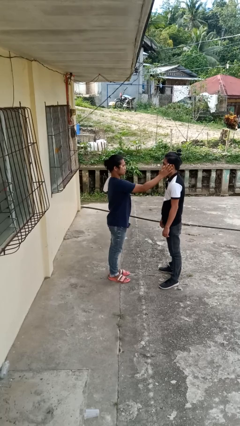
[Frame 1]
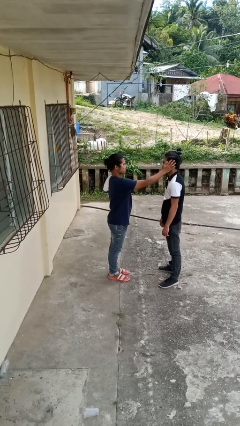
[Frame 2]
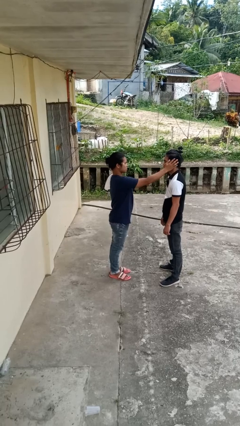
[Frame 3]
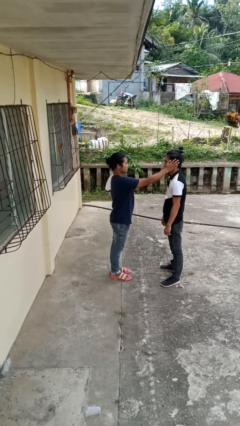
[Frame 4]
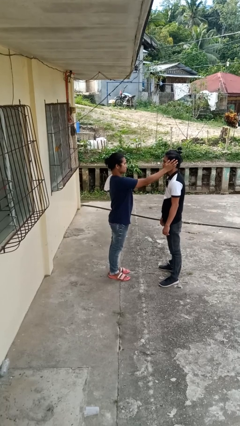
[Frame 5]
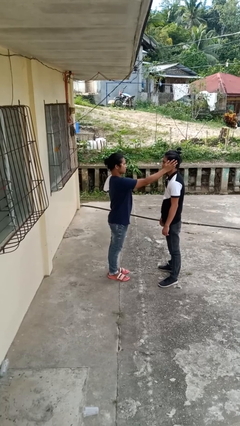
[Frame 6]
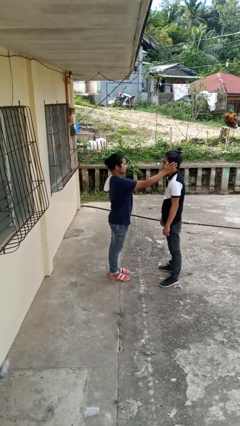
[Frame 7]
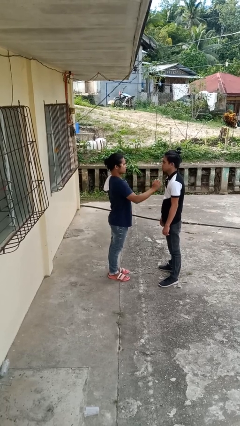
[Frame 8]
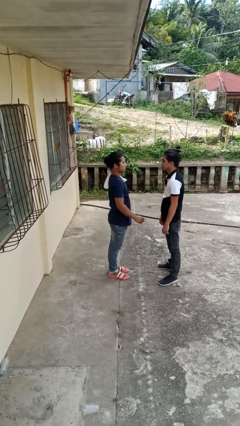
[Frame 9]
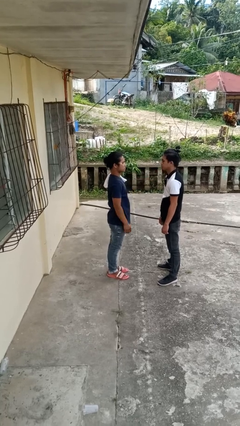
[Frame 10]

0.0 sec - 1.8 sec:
person touches face of person

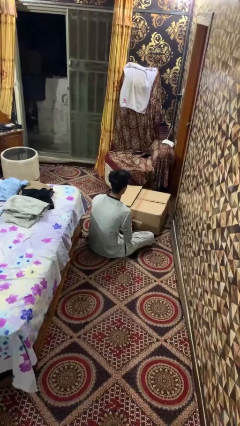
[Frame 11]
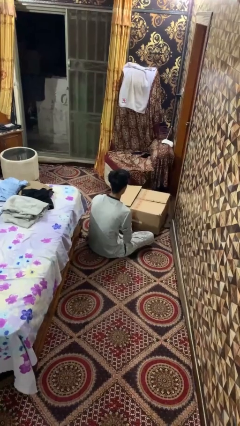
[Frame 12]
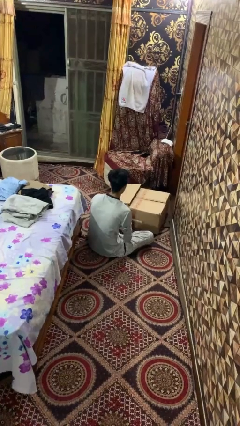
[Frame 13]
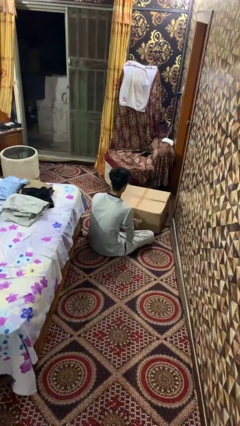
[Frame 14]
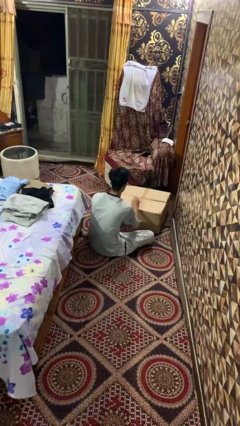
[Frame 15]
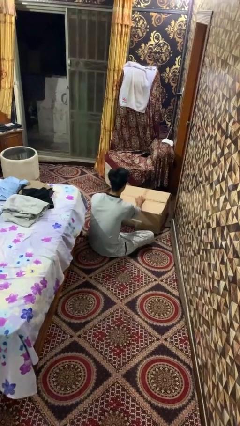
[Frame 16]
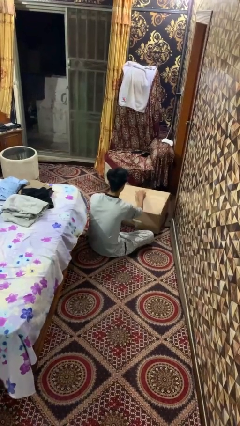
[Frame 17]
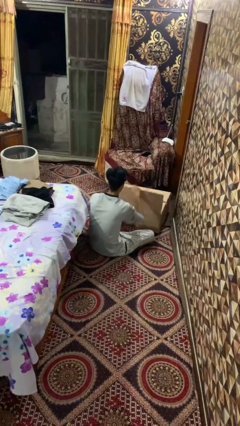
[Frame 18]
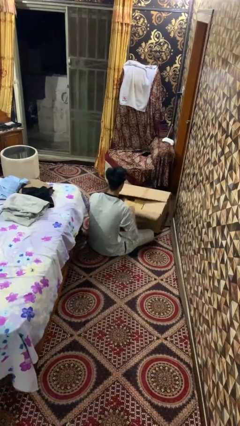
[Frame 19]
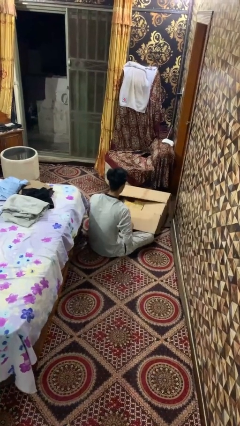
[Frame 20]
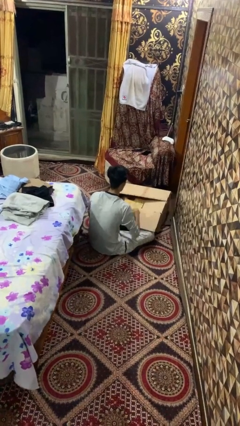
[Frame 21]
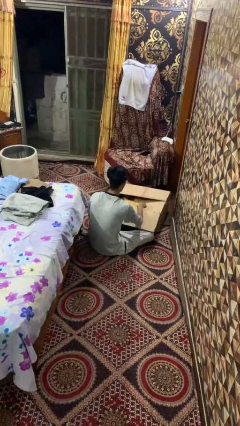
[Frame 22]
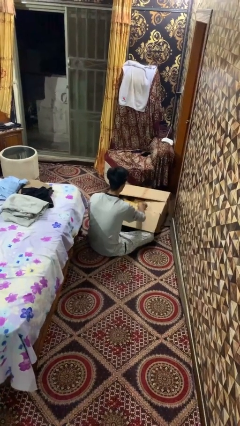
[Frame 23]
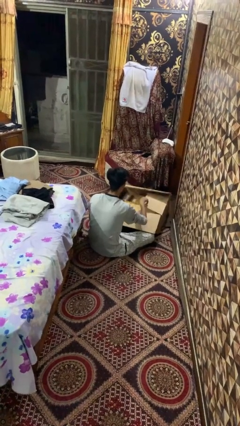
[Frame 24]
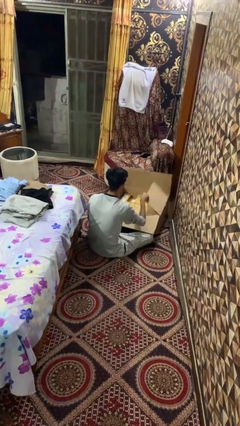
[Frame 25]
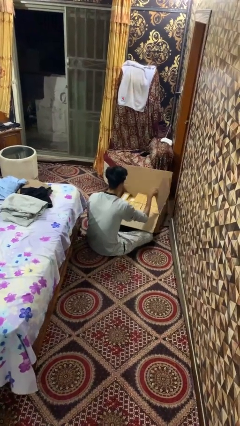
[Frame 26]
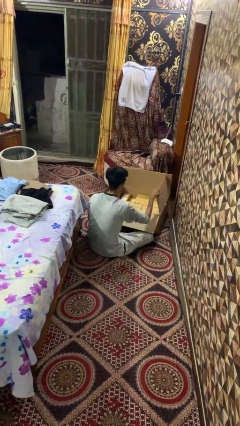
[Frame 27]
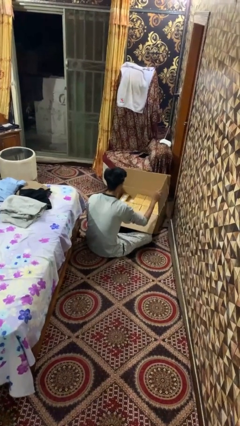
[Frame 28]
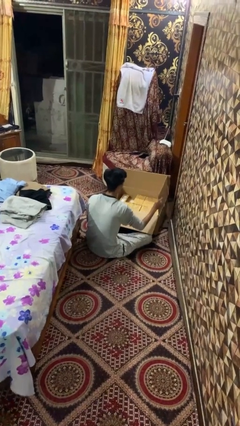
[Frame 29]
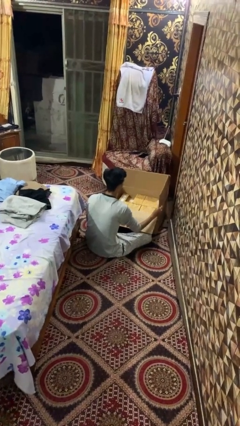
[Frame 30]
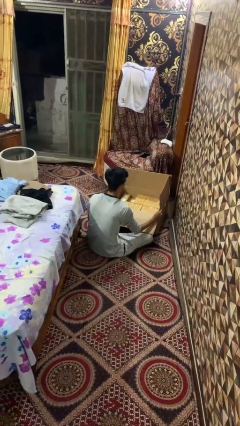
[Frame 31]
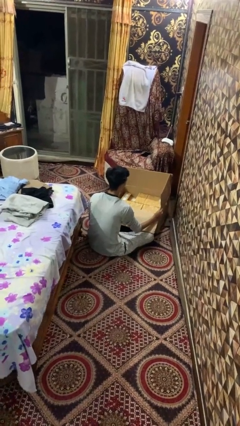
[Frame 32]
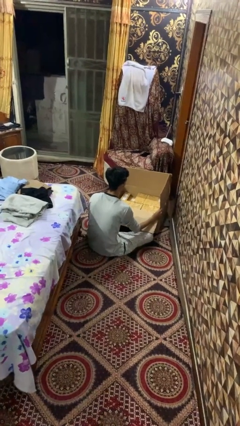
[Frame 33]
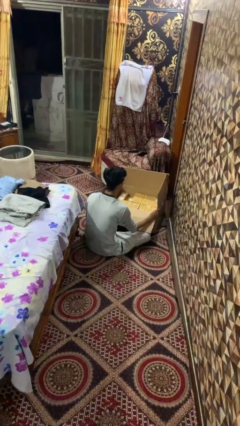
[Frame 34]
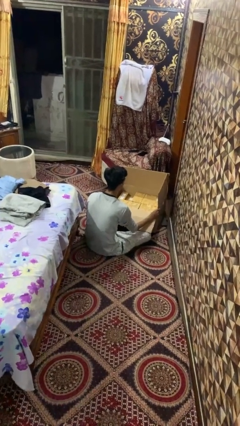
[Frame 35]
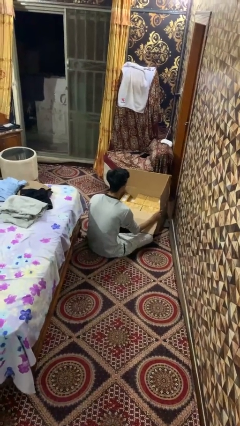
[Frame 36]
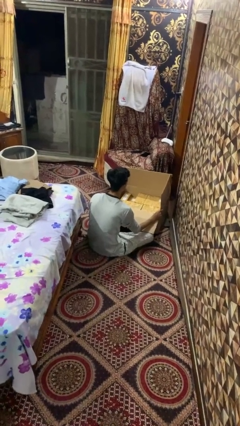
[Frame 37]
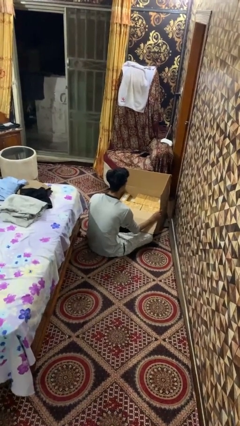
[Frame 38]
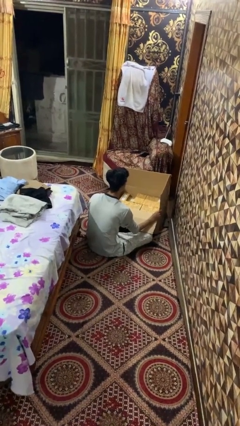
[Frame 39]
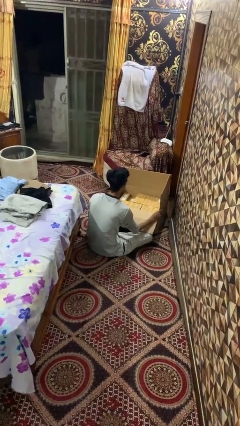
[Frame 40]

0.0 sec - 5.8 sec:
person opens box

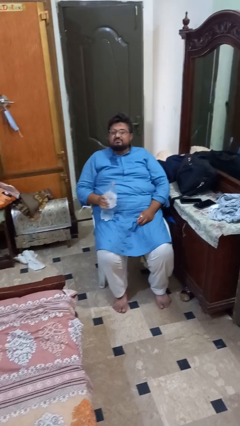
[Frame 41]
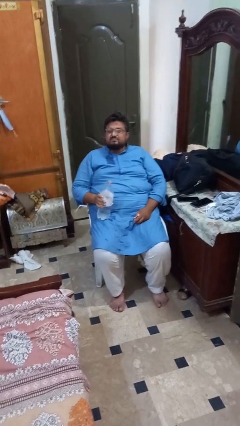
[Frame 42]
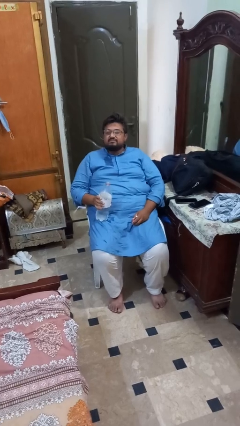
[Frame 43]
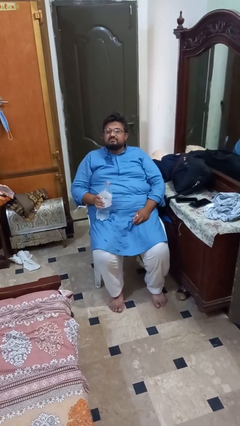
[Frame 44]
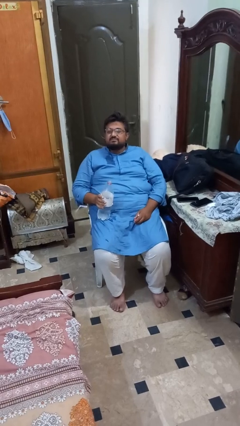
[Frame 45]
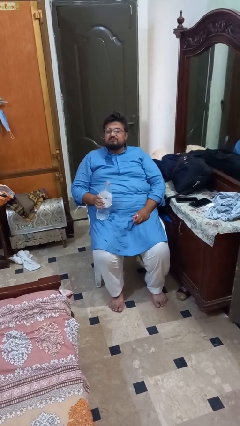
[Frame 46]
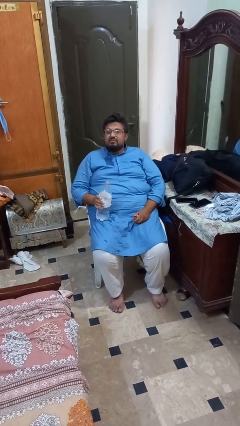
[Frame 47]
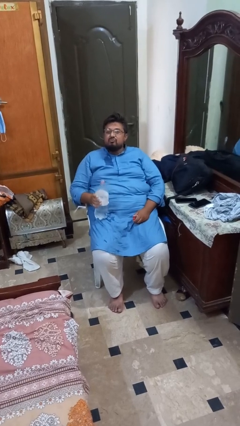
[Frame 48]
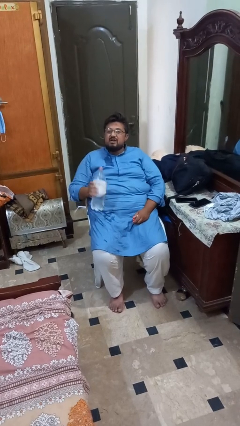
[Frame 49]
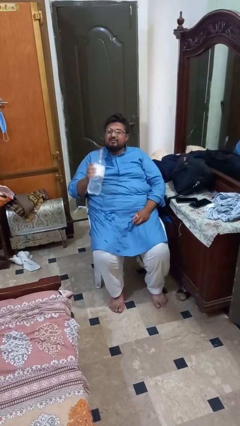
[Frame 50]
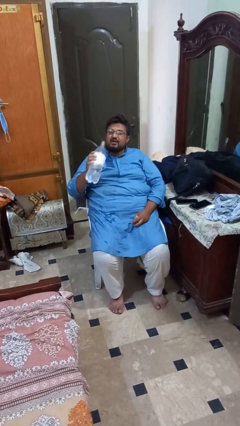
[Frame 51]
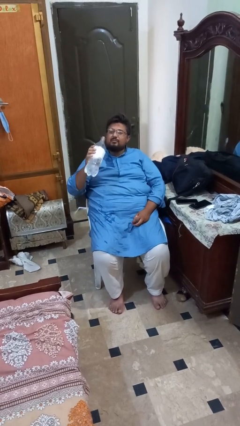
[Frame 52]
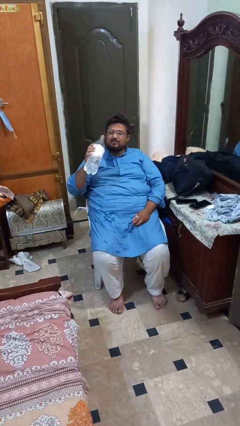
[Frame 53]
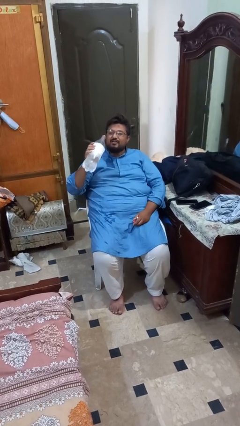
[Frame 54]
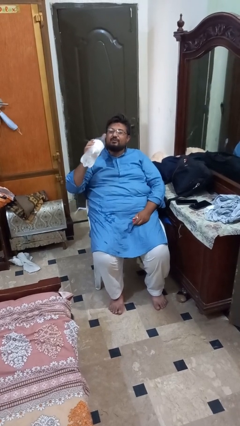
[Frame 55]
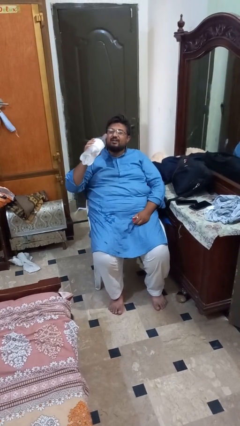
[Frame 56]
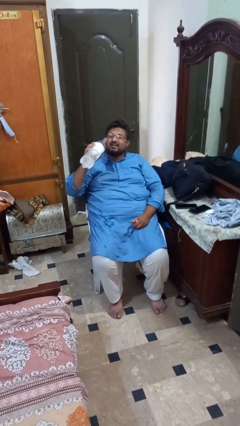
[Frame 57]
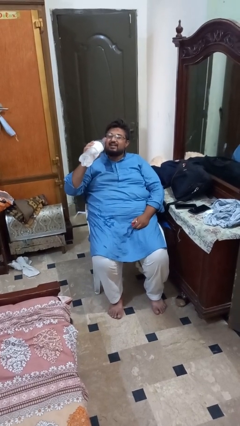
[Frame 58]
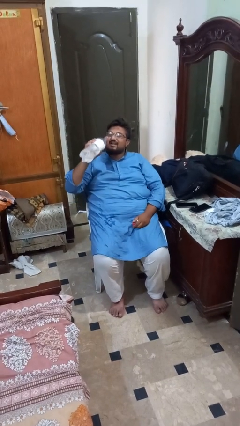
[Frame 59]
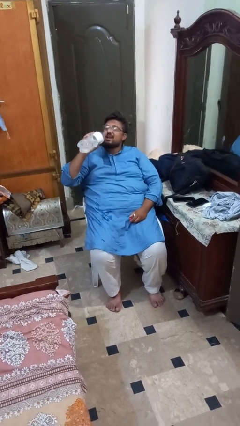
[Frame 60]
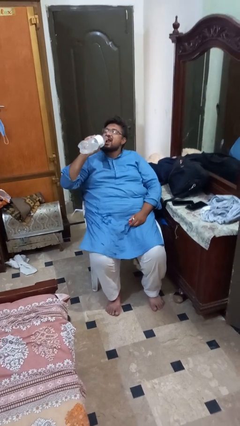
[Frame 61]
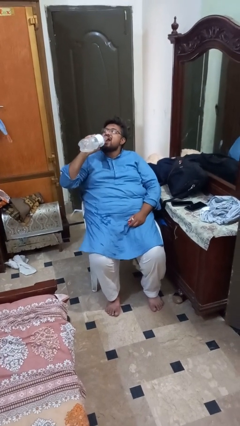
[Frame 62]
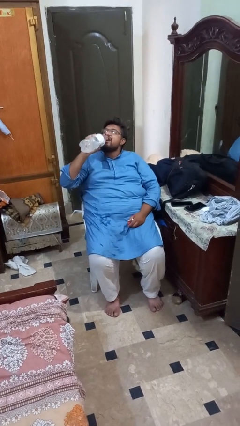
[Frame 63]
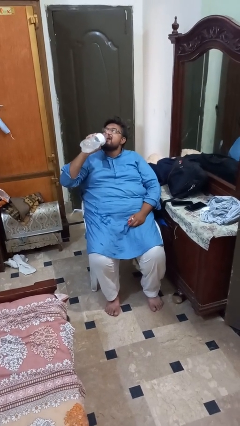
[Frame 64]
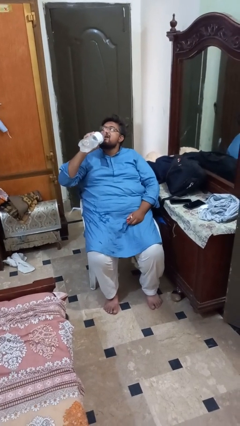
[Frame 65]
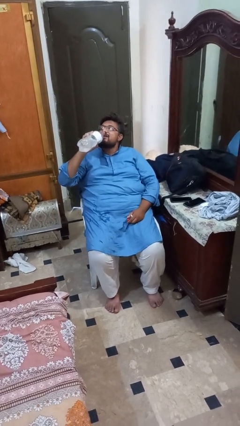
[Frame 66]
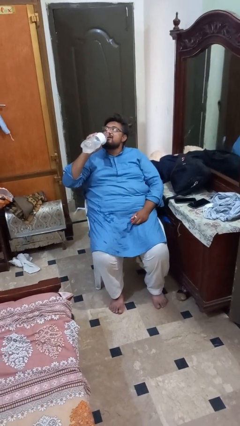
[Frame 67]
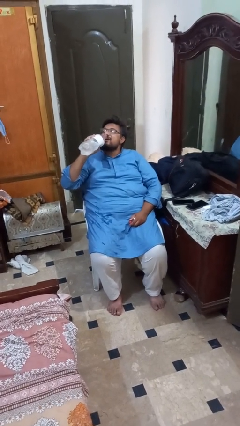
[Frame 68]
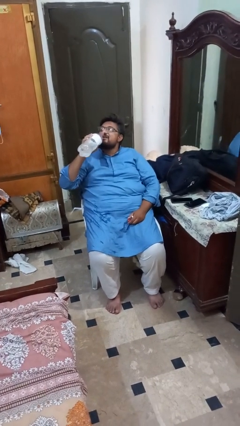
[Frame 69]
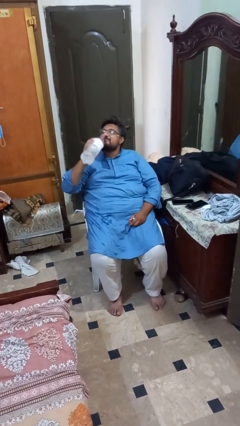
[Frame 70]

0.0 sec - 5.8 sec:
person drinks from bottle

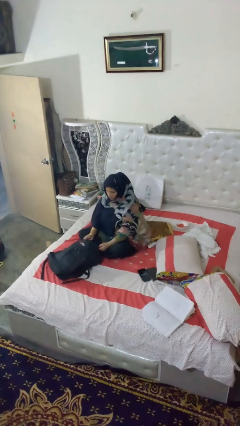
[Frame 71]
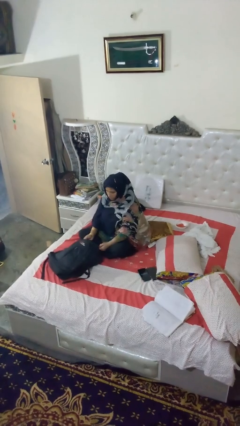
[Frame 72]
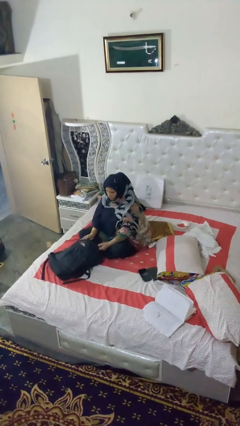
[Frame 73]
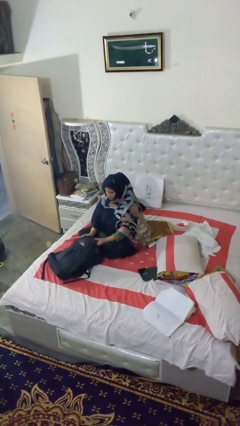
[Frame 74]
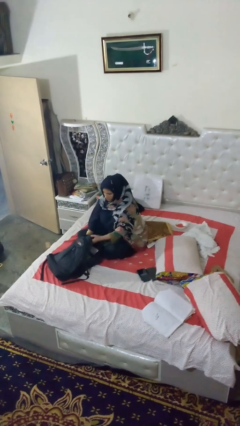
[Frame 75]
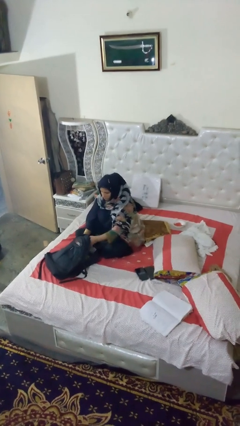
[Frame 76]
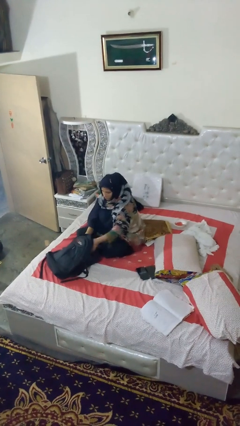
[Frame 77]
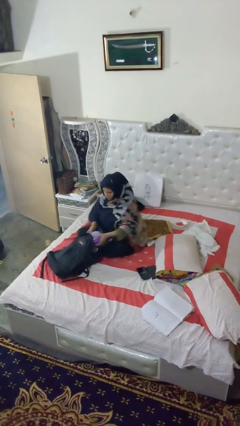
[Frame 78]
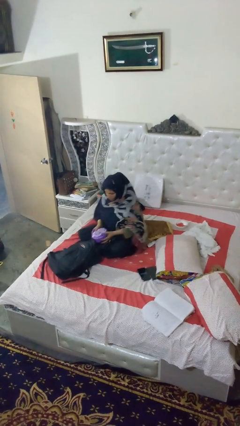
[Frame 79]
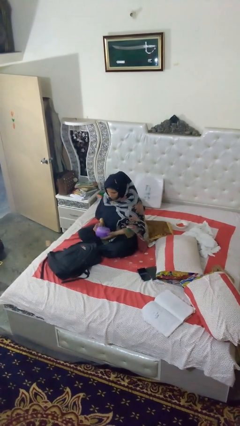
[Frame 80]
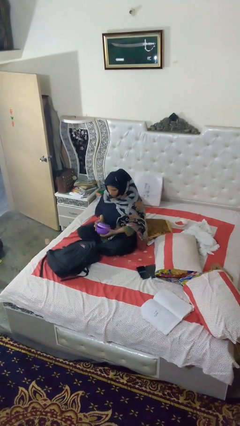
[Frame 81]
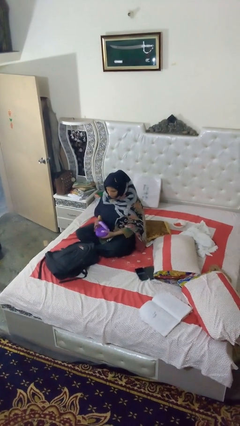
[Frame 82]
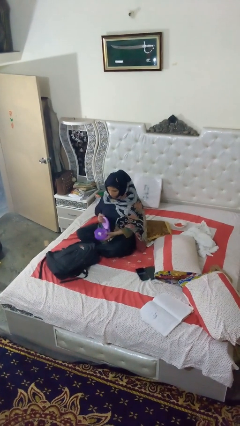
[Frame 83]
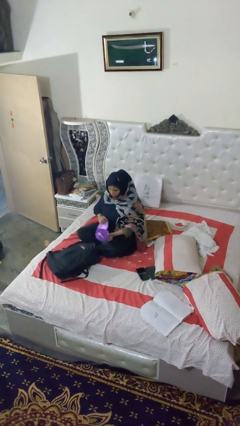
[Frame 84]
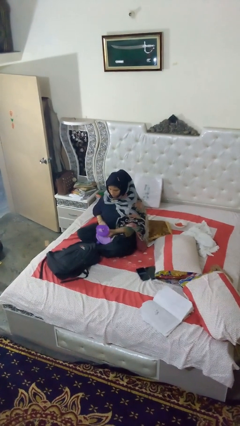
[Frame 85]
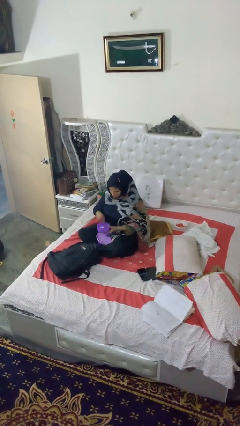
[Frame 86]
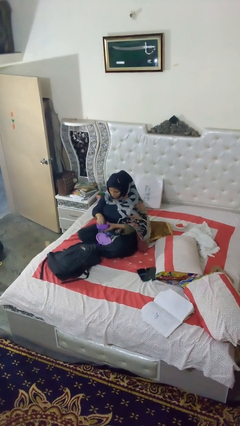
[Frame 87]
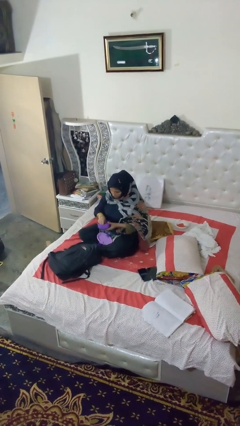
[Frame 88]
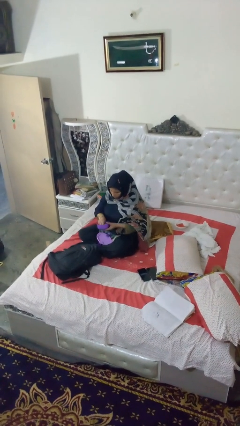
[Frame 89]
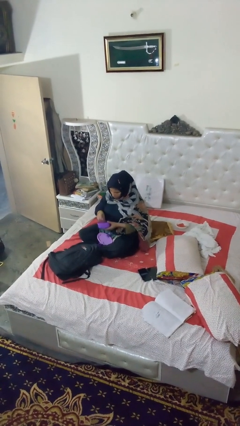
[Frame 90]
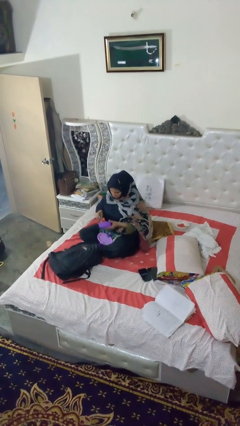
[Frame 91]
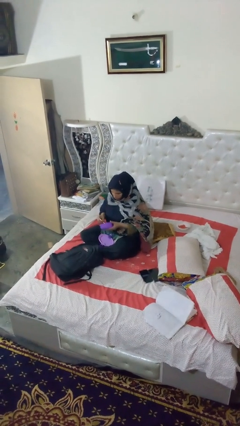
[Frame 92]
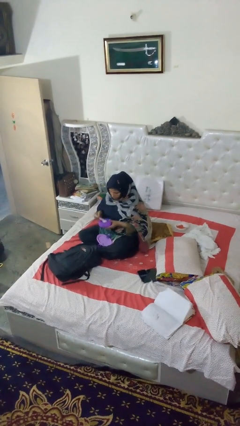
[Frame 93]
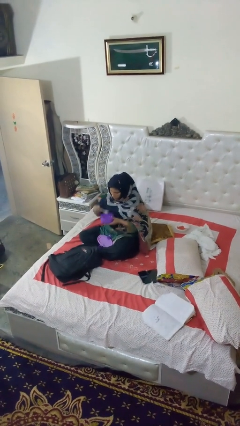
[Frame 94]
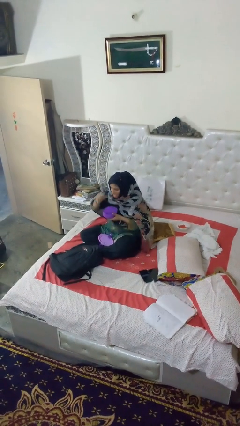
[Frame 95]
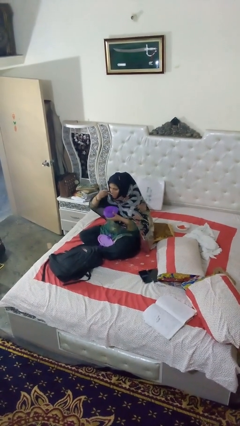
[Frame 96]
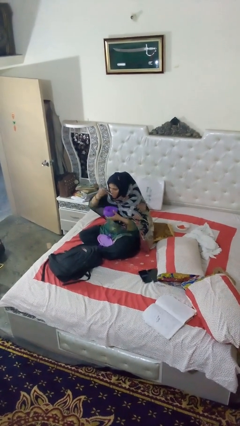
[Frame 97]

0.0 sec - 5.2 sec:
person eats snack from bag
